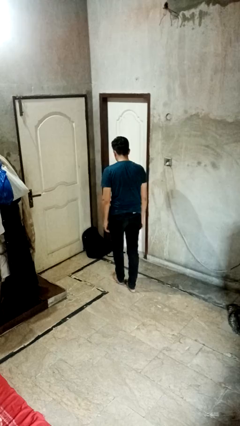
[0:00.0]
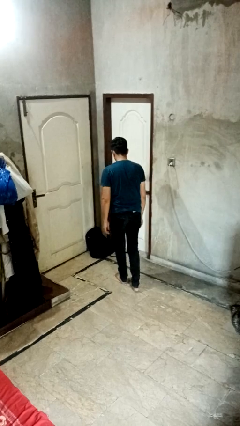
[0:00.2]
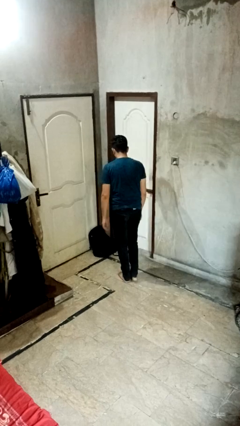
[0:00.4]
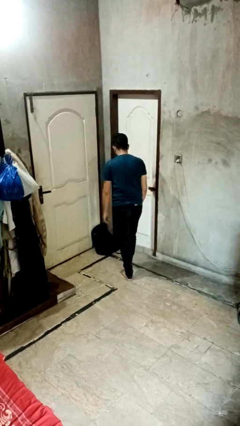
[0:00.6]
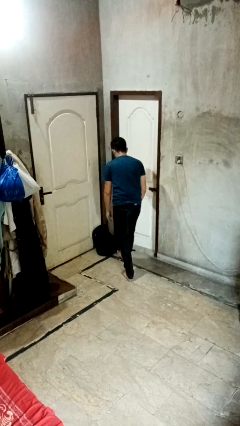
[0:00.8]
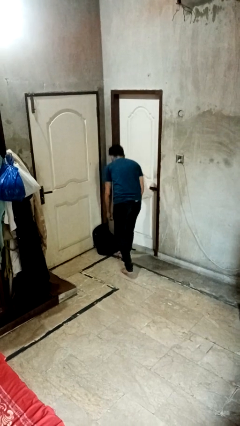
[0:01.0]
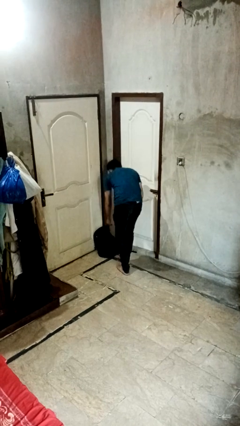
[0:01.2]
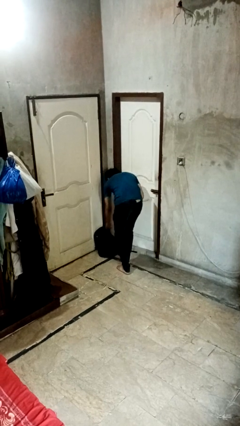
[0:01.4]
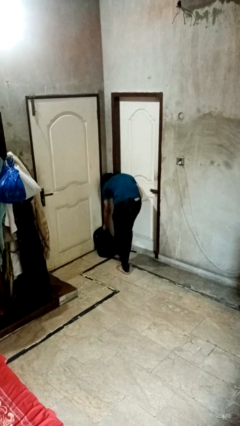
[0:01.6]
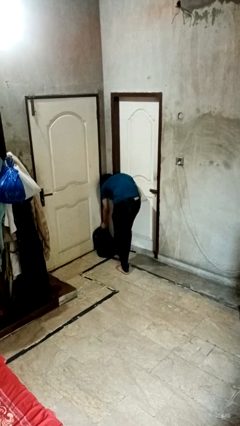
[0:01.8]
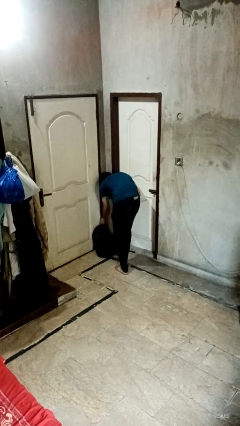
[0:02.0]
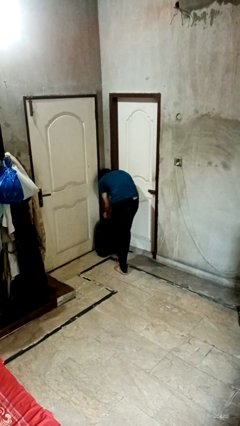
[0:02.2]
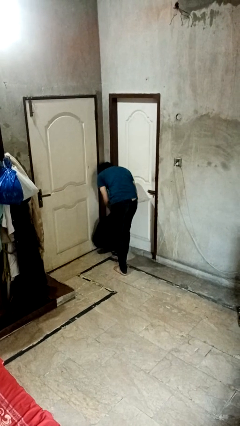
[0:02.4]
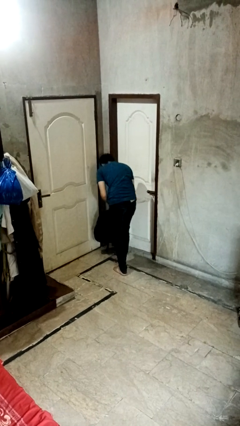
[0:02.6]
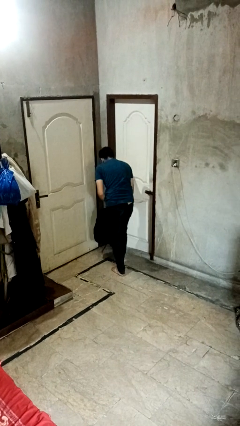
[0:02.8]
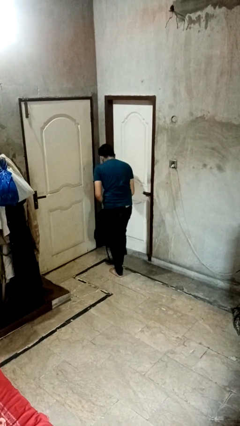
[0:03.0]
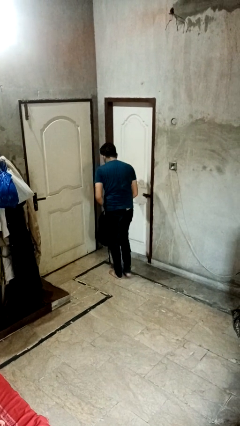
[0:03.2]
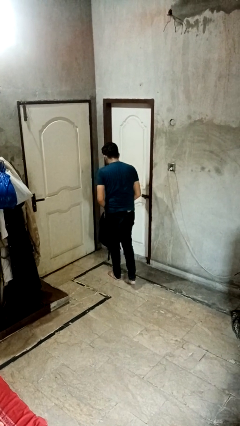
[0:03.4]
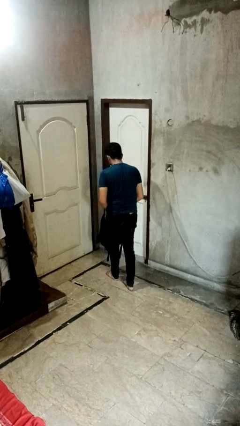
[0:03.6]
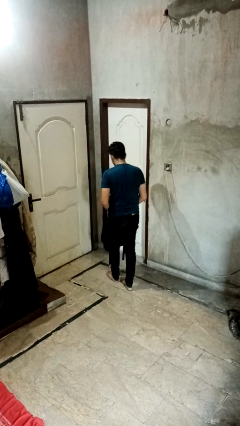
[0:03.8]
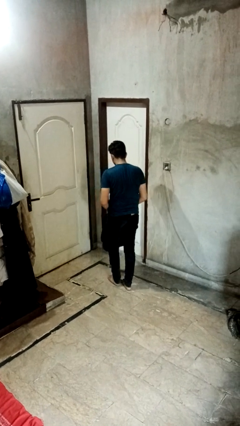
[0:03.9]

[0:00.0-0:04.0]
person picks up object from floor

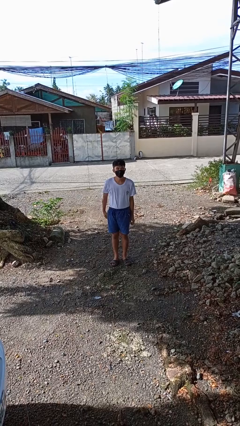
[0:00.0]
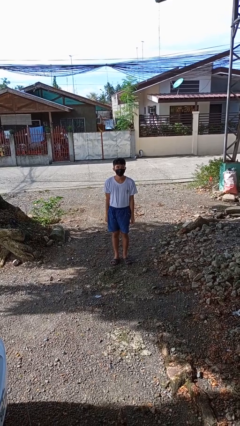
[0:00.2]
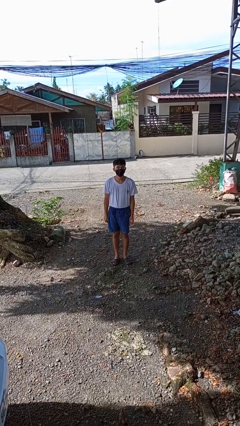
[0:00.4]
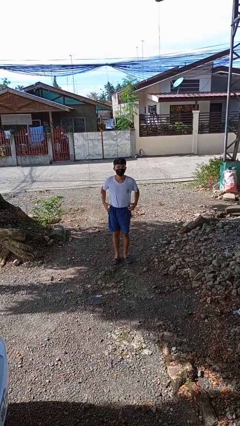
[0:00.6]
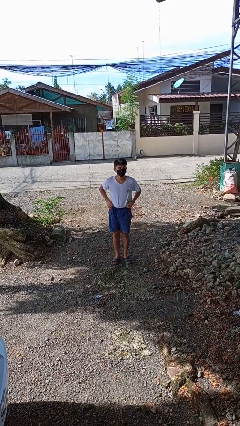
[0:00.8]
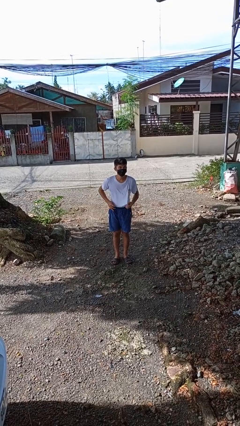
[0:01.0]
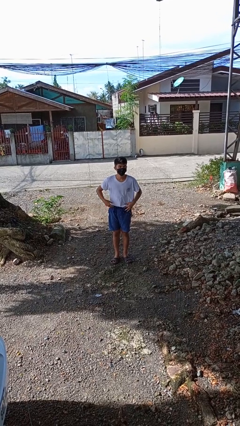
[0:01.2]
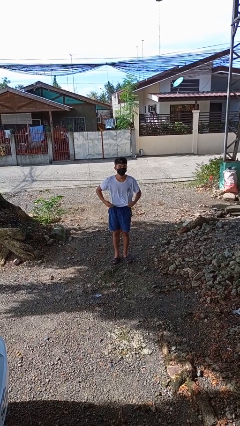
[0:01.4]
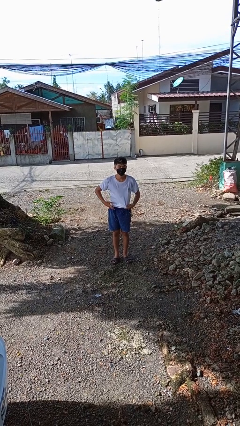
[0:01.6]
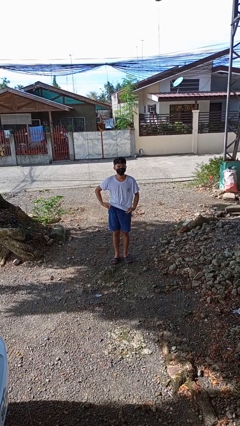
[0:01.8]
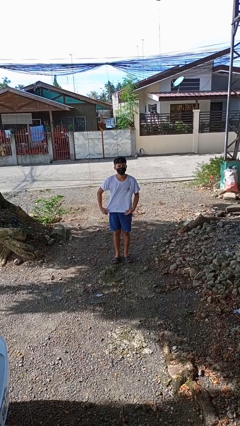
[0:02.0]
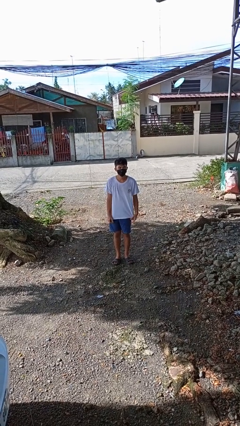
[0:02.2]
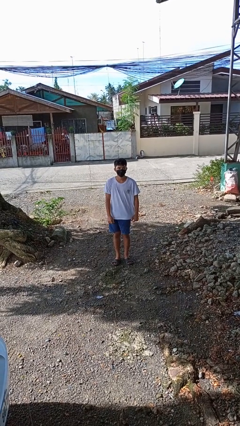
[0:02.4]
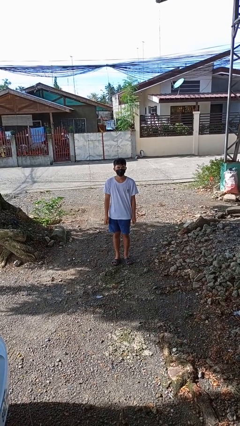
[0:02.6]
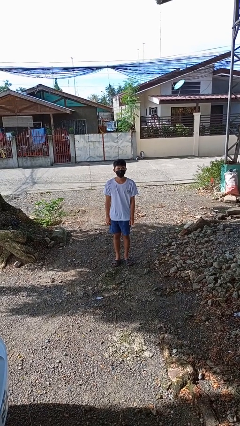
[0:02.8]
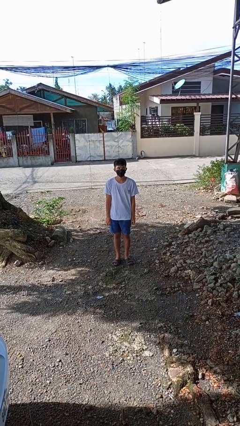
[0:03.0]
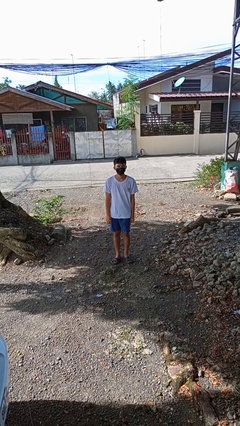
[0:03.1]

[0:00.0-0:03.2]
person untucks shirt

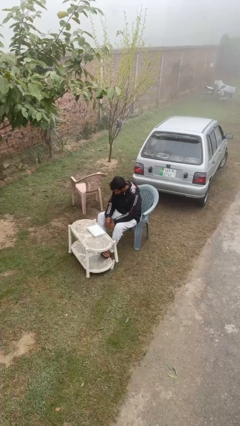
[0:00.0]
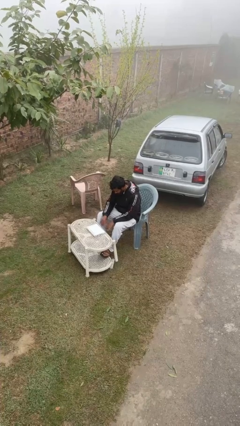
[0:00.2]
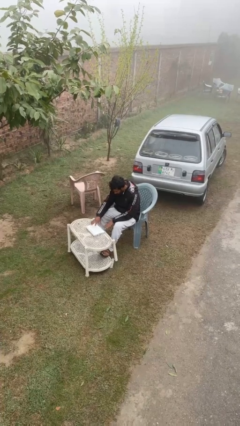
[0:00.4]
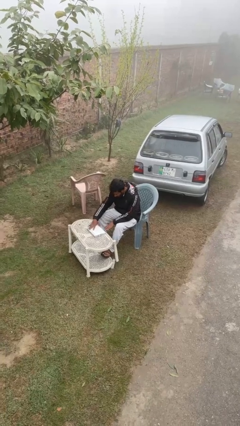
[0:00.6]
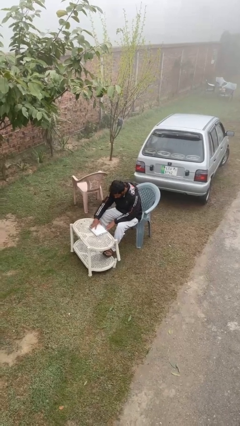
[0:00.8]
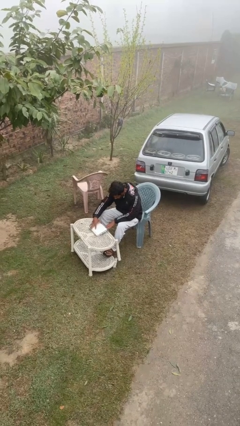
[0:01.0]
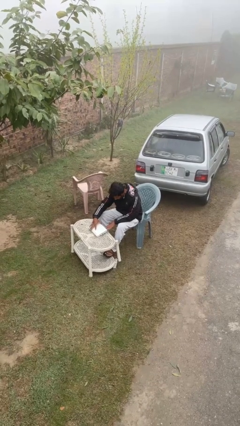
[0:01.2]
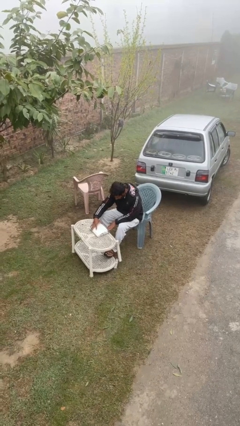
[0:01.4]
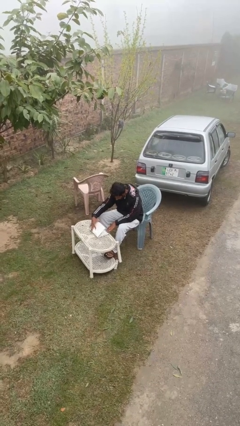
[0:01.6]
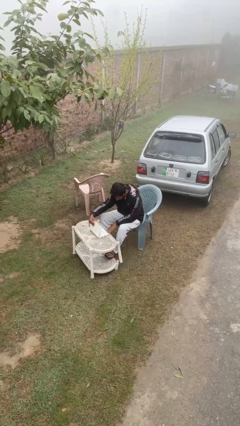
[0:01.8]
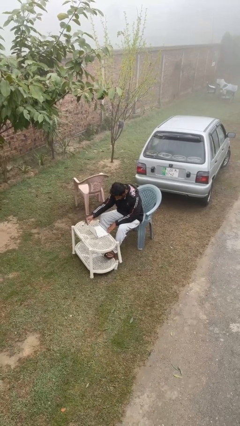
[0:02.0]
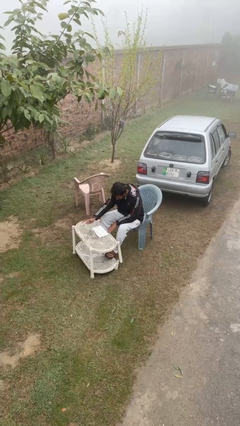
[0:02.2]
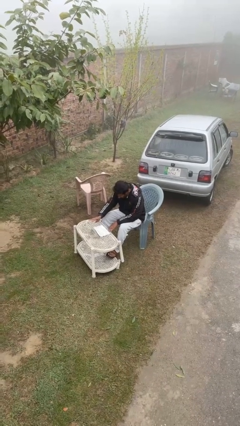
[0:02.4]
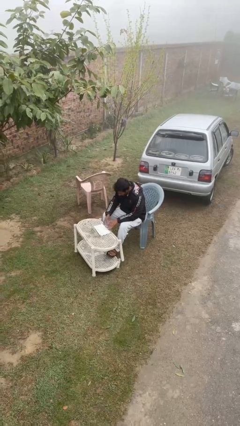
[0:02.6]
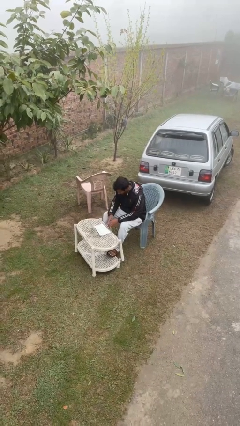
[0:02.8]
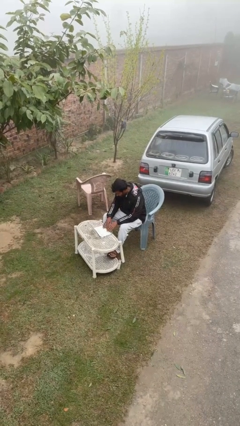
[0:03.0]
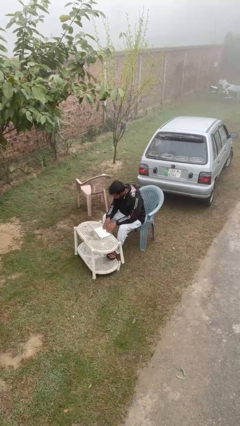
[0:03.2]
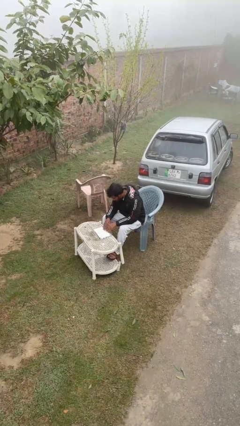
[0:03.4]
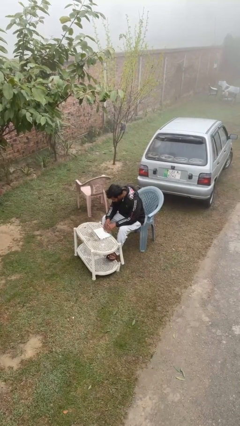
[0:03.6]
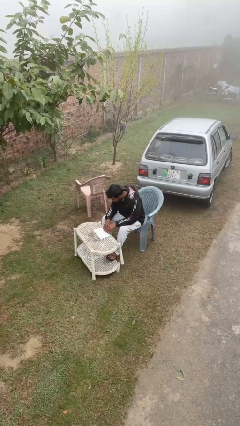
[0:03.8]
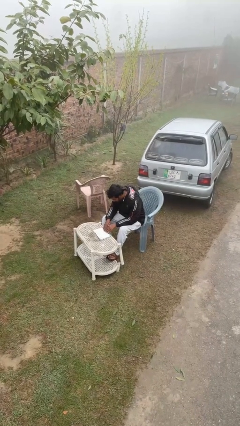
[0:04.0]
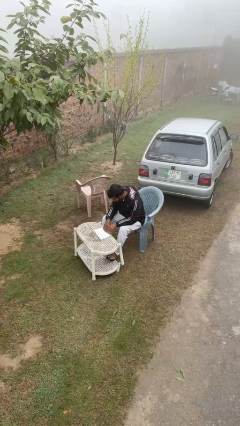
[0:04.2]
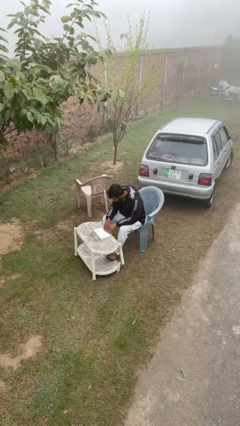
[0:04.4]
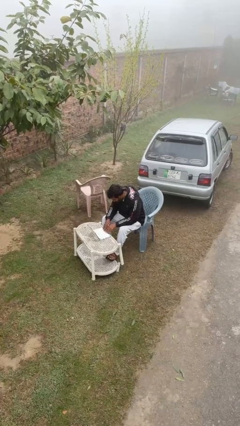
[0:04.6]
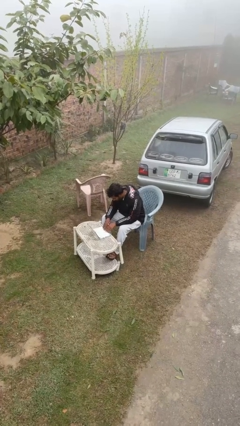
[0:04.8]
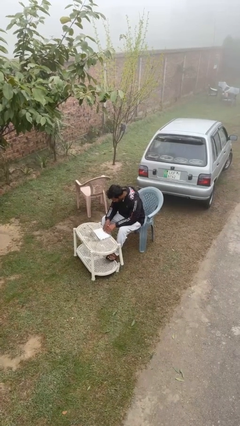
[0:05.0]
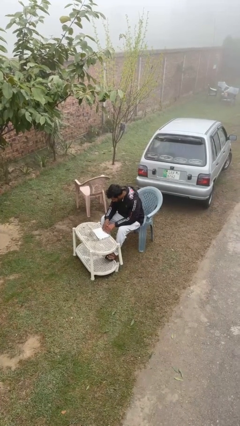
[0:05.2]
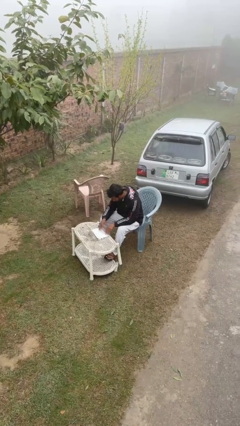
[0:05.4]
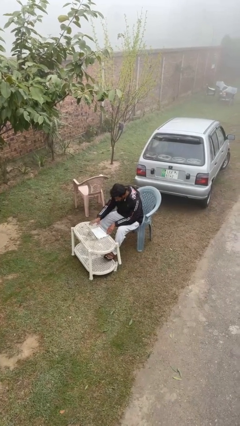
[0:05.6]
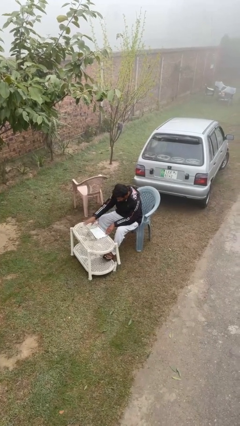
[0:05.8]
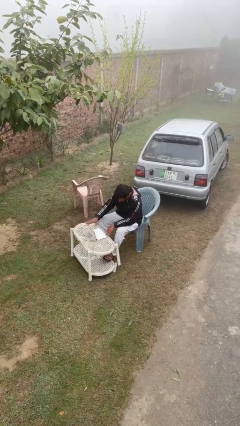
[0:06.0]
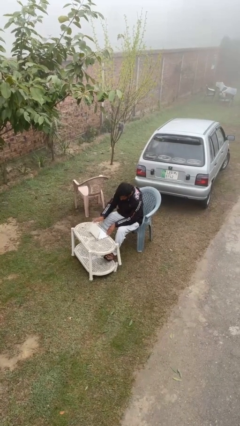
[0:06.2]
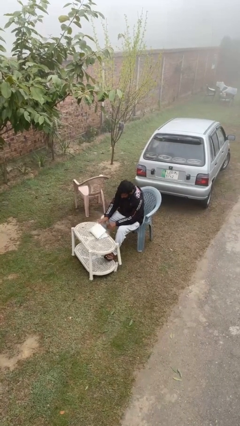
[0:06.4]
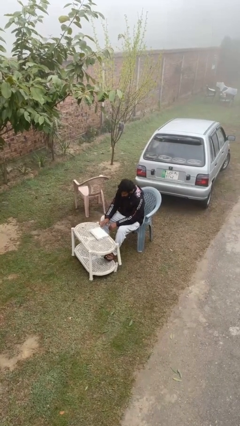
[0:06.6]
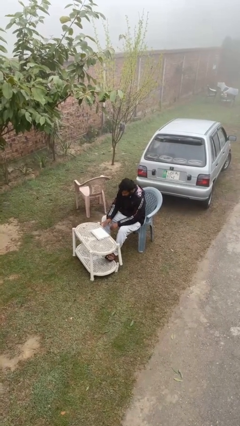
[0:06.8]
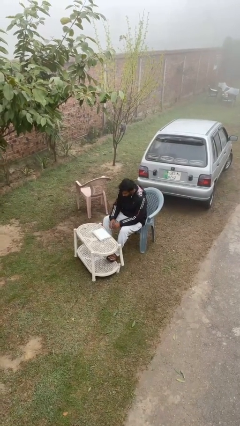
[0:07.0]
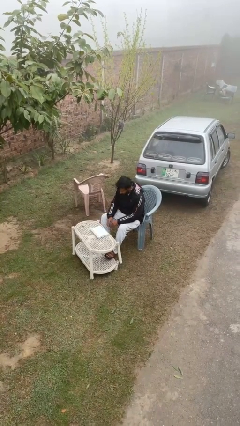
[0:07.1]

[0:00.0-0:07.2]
person interacts with laptop

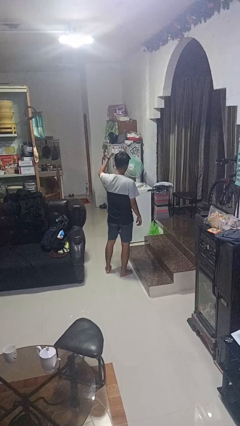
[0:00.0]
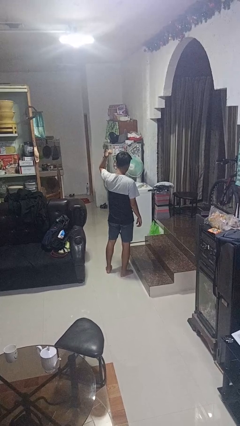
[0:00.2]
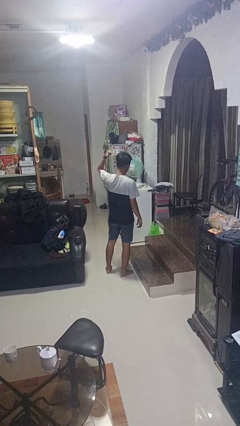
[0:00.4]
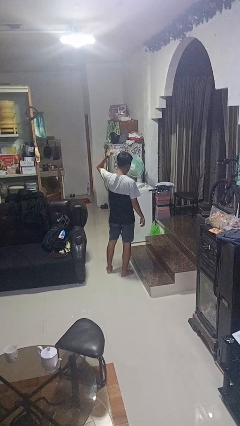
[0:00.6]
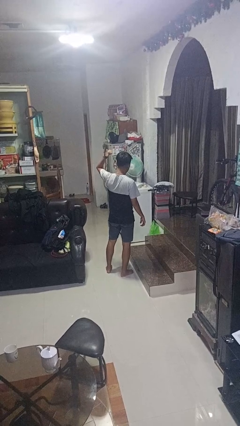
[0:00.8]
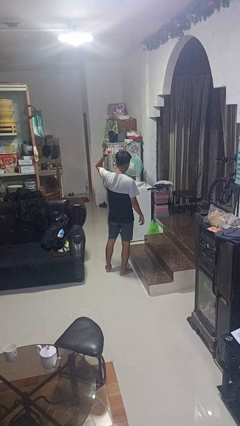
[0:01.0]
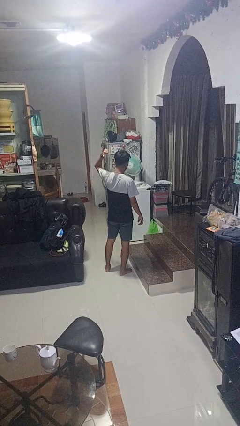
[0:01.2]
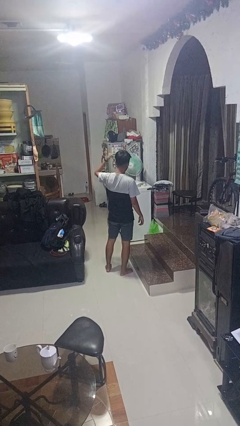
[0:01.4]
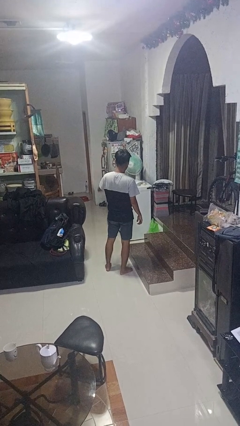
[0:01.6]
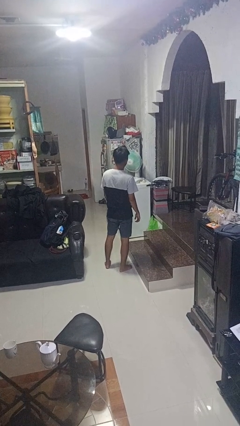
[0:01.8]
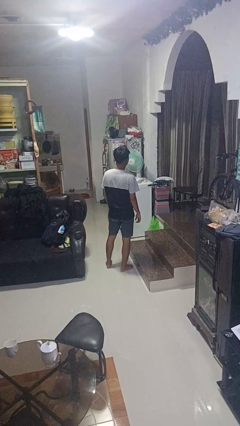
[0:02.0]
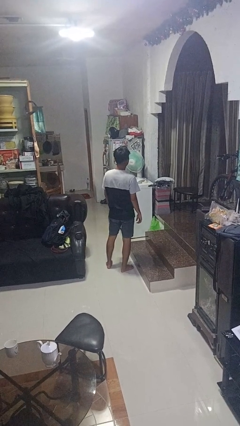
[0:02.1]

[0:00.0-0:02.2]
person gestures behind me

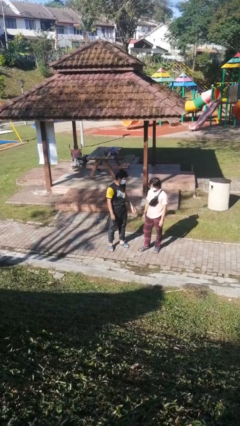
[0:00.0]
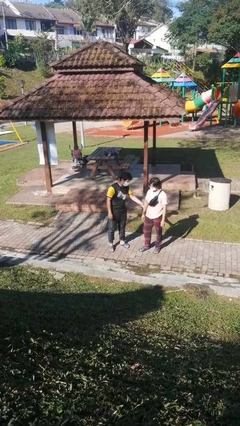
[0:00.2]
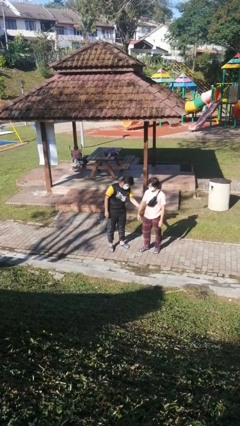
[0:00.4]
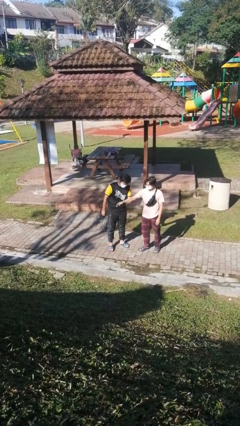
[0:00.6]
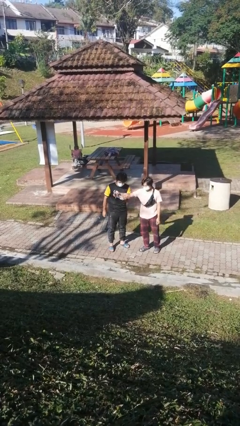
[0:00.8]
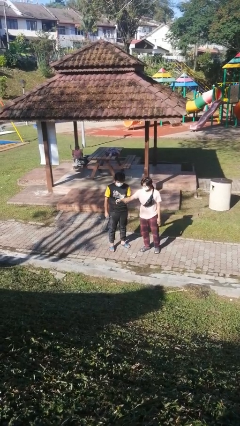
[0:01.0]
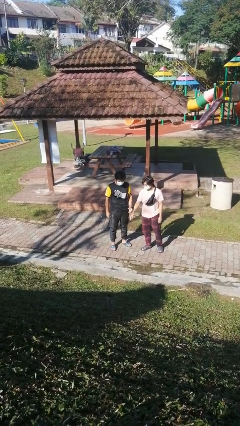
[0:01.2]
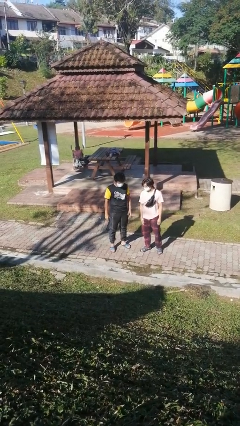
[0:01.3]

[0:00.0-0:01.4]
person grabs person by forearm
